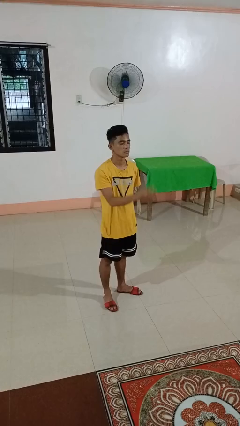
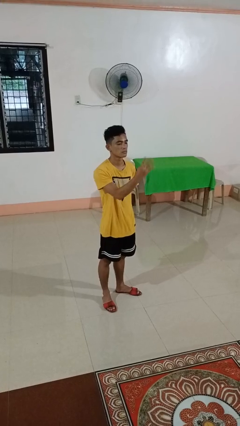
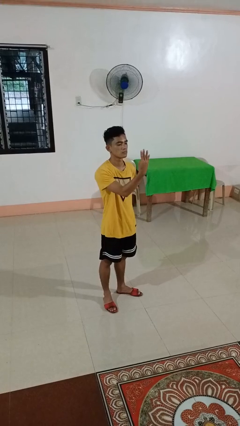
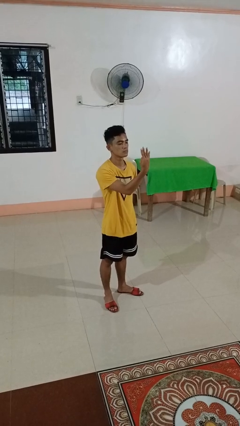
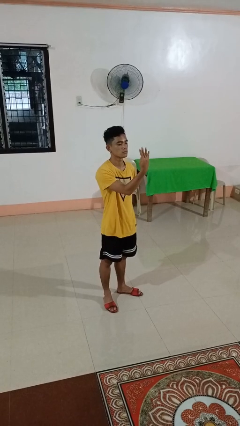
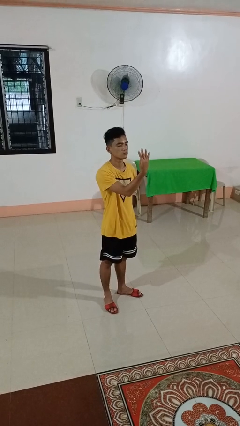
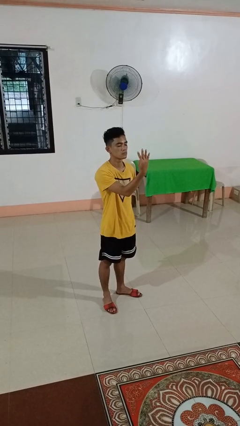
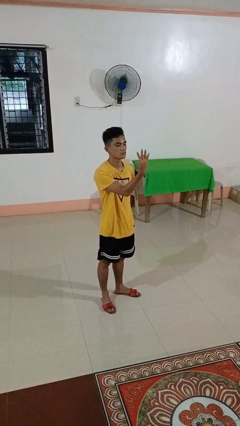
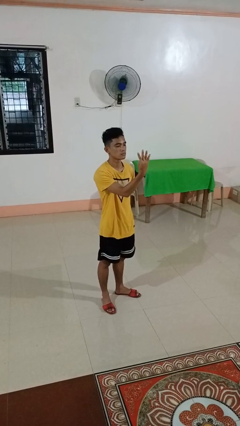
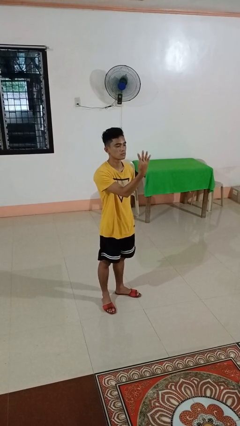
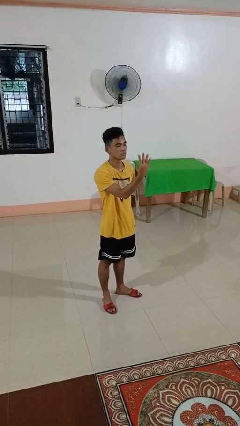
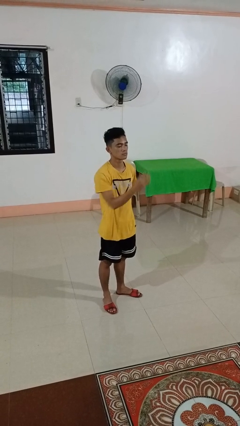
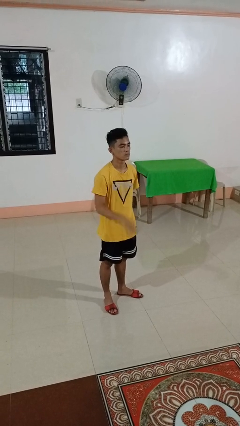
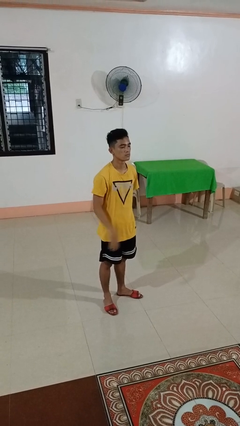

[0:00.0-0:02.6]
person gestures number four

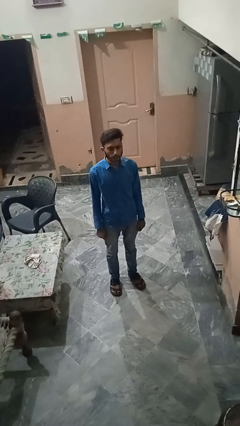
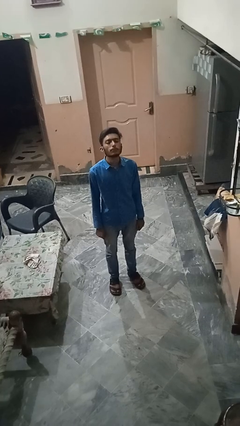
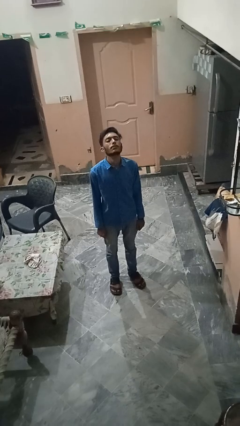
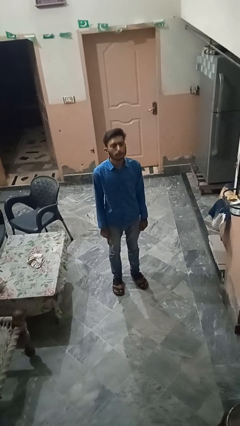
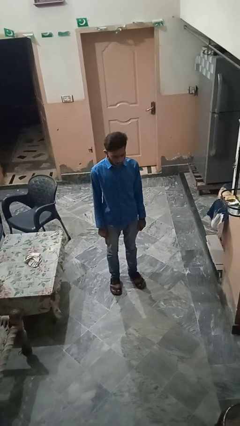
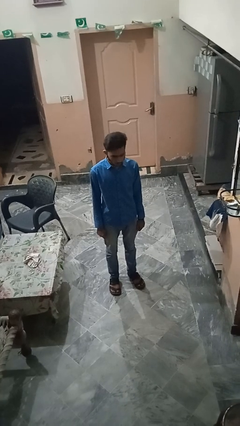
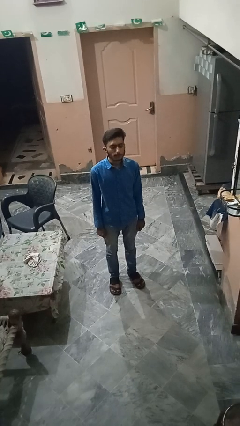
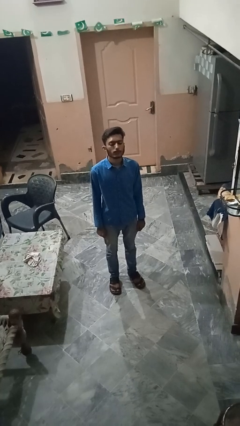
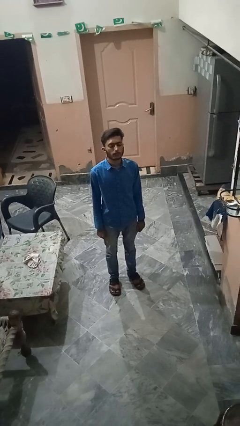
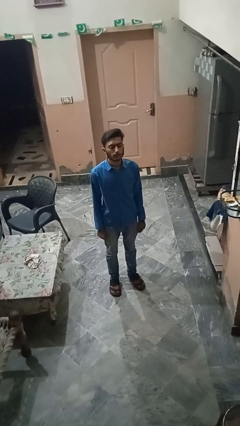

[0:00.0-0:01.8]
person nods head

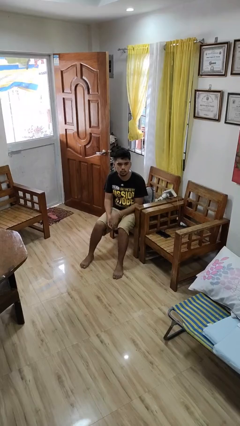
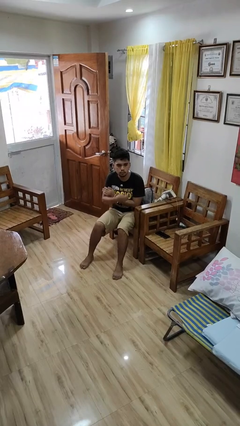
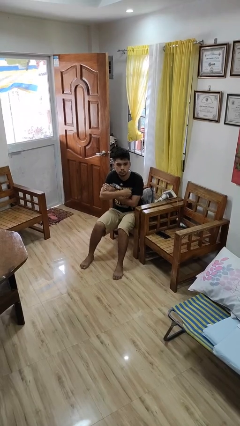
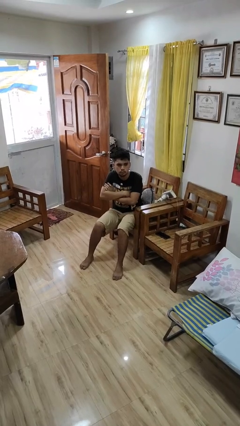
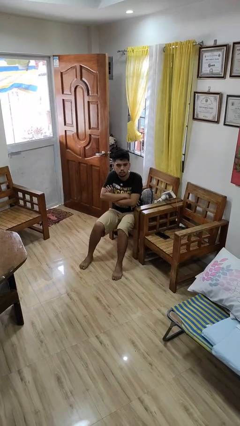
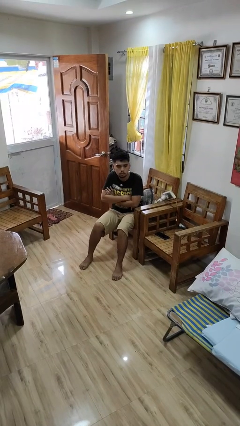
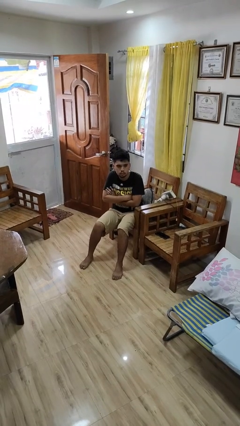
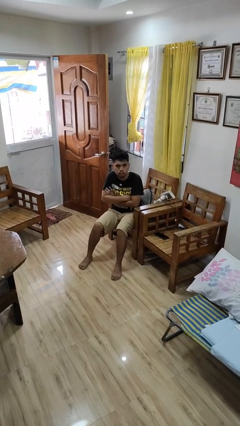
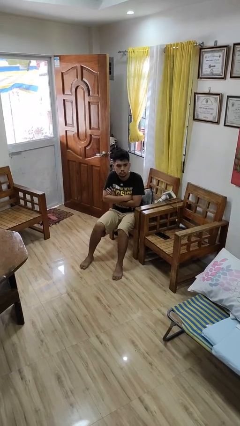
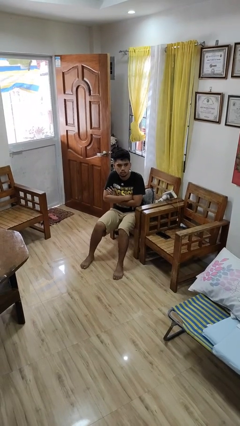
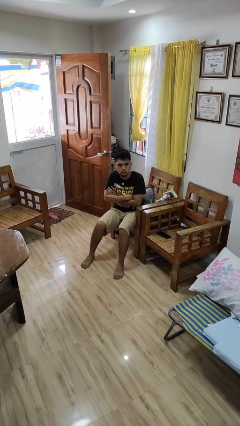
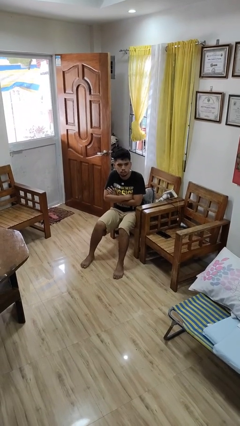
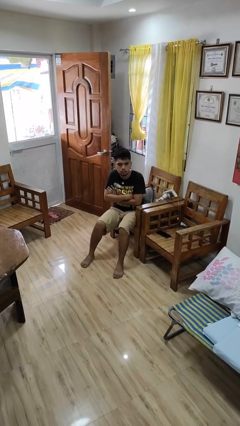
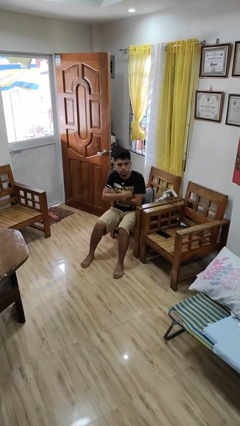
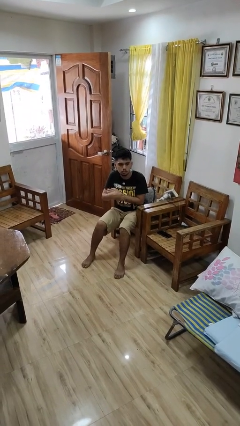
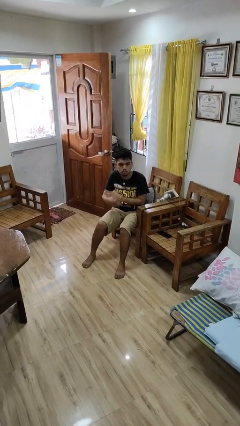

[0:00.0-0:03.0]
person crosses arms

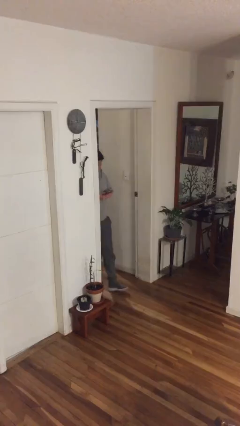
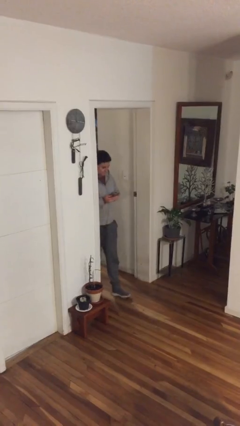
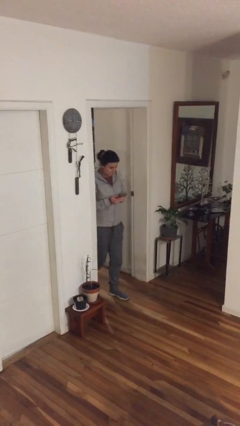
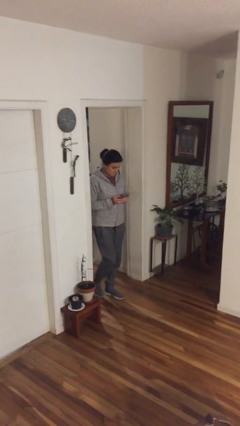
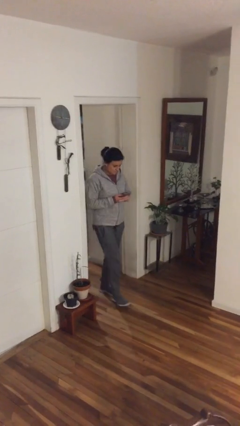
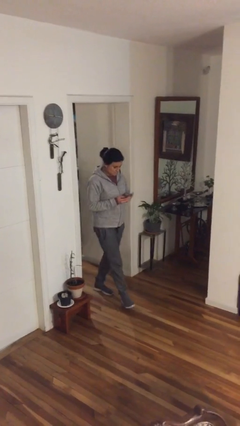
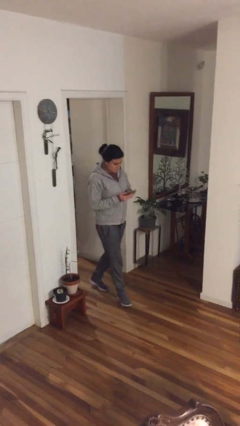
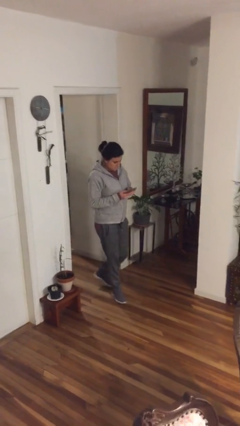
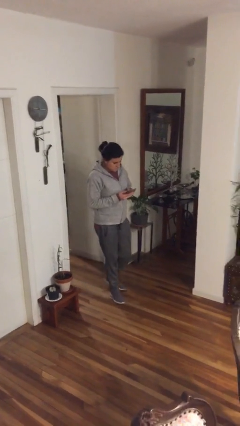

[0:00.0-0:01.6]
person enters scene through structure

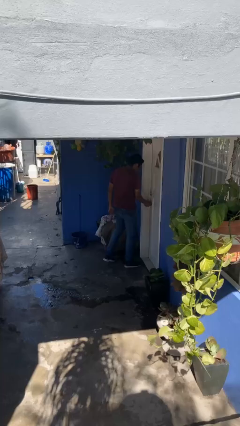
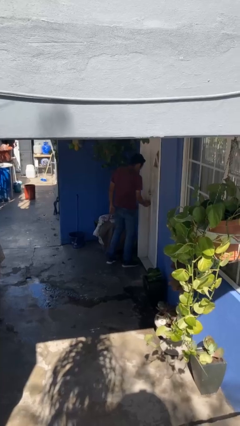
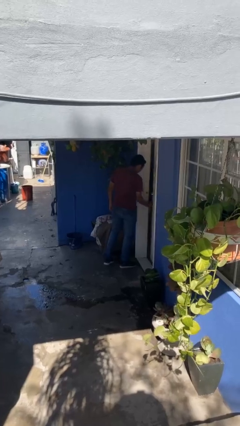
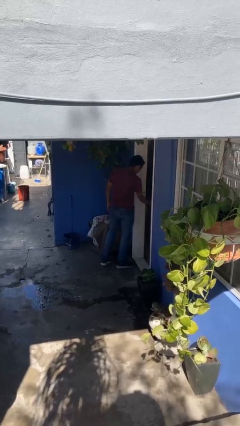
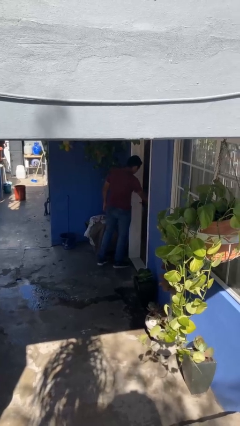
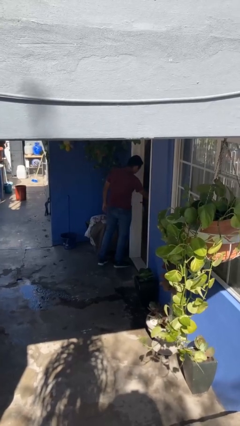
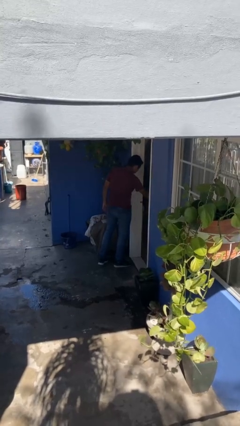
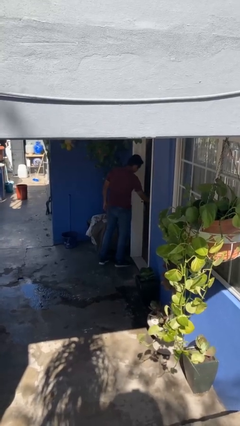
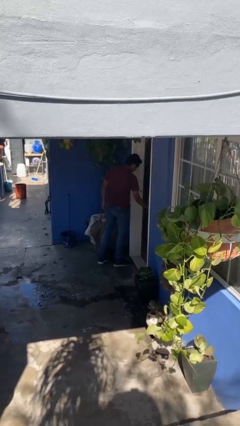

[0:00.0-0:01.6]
person opens facility door

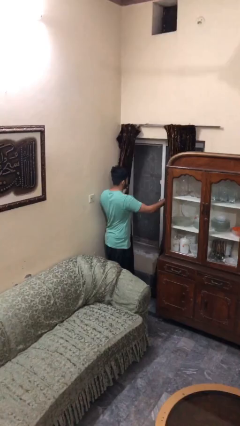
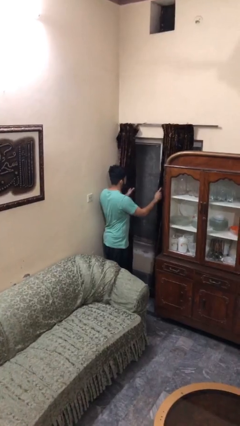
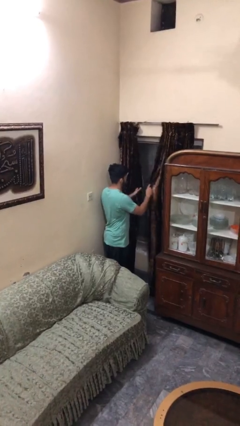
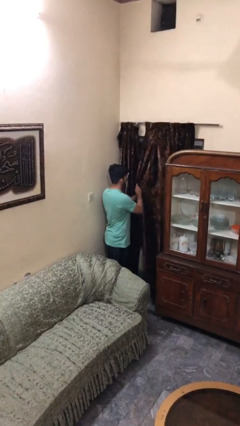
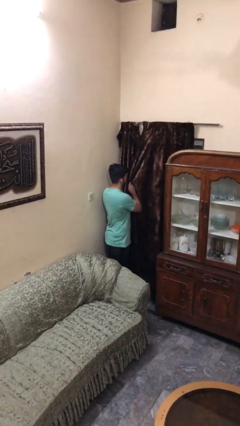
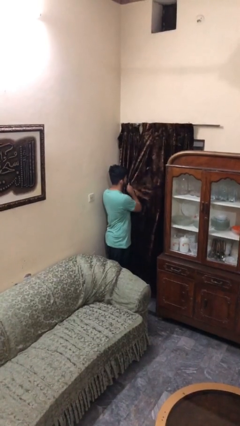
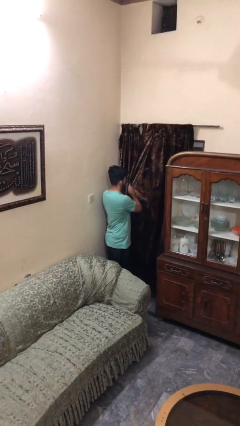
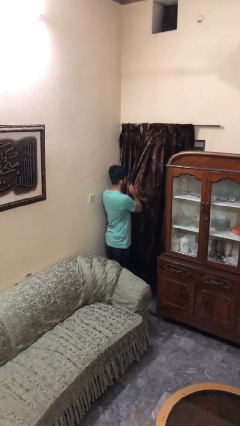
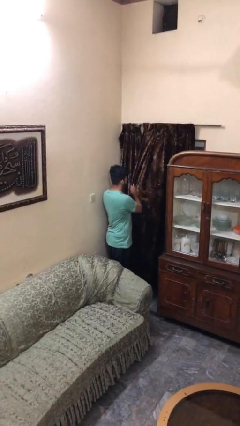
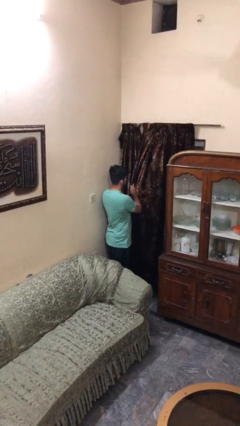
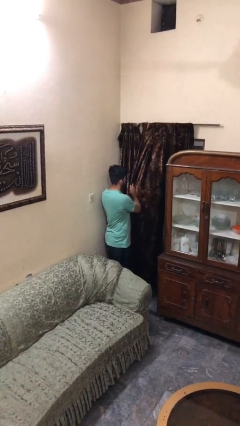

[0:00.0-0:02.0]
person closes curtains

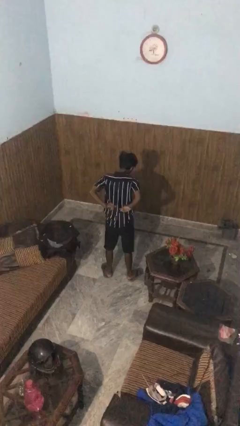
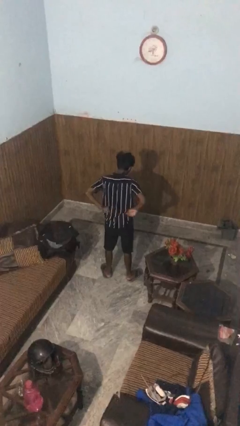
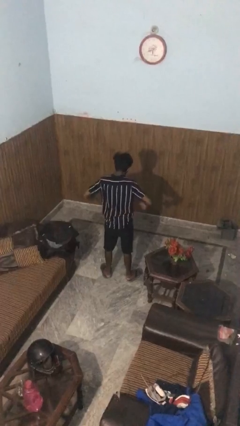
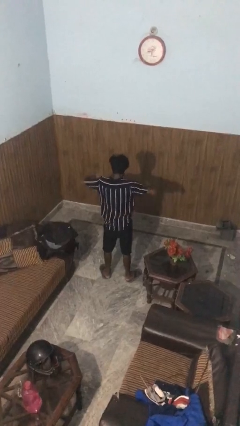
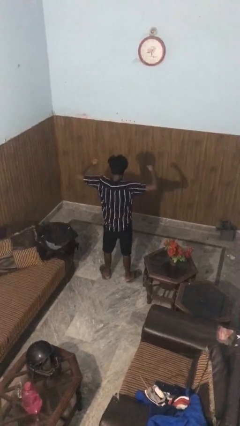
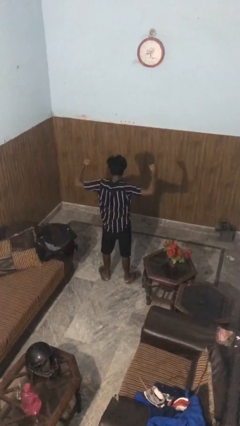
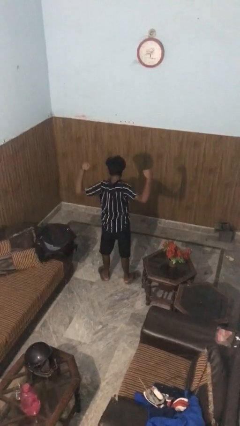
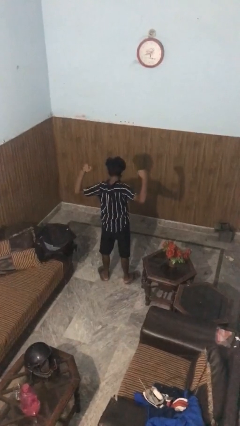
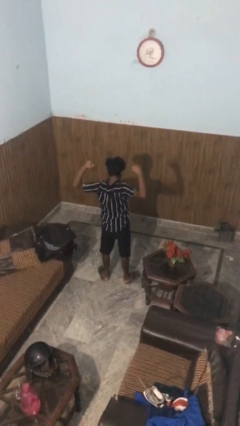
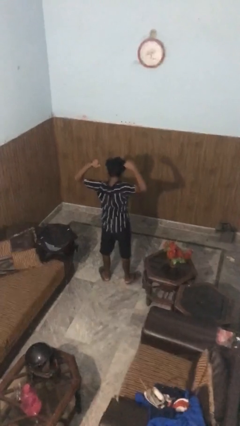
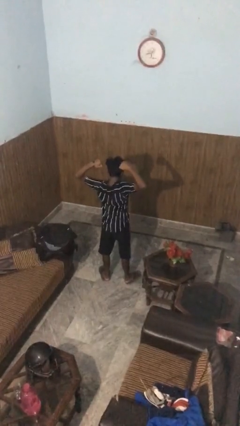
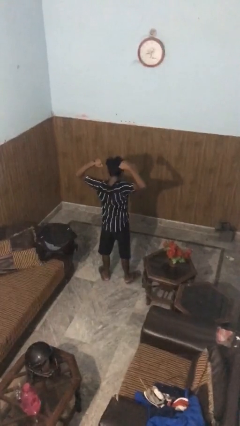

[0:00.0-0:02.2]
person stretches arms to side

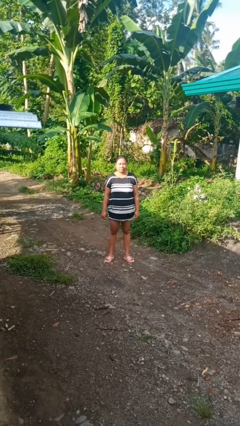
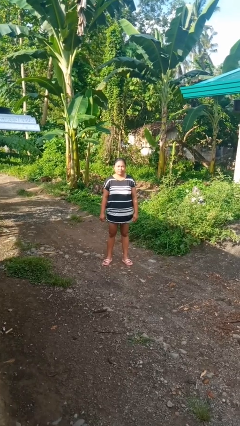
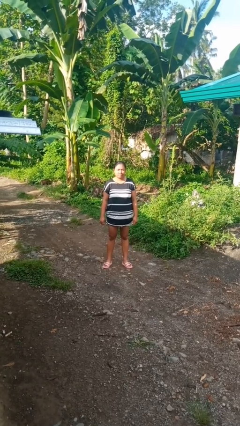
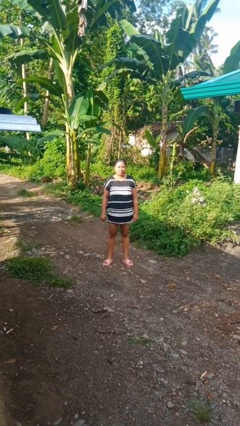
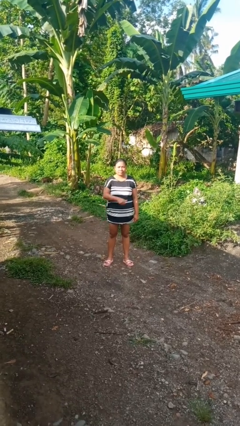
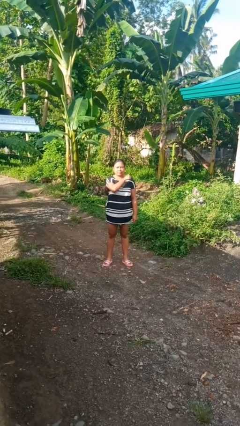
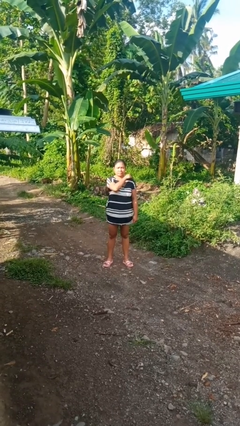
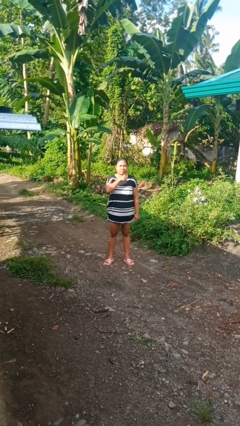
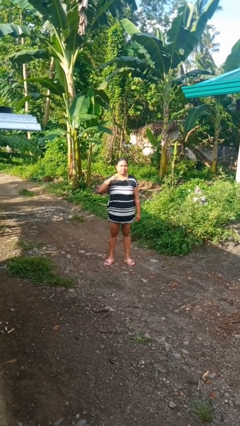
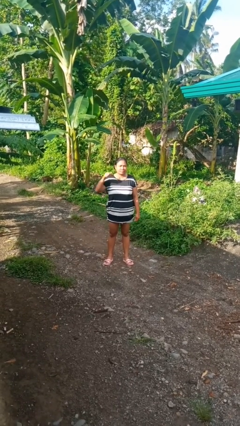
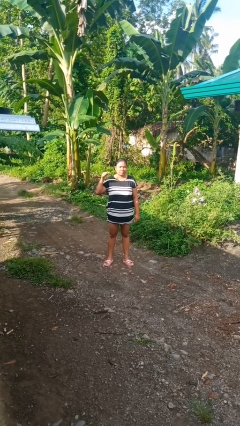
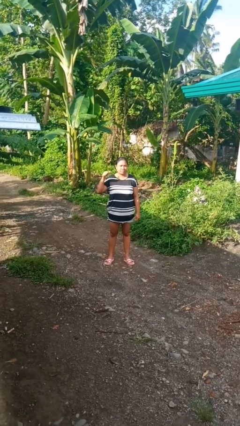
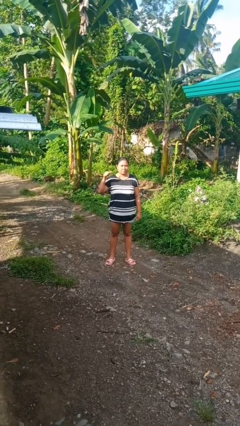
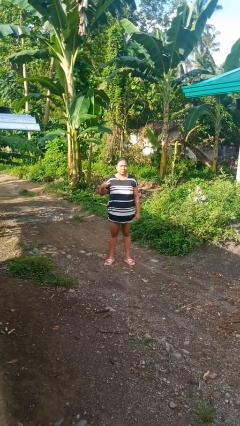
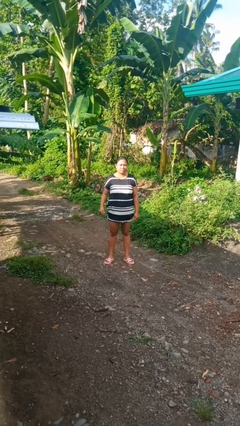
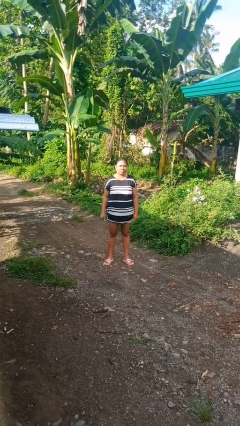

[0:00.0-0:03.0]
person gestures cut
